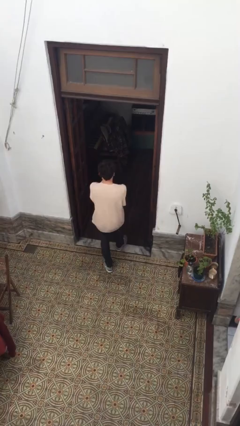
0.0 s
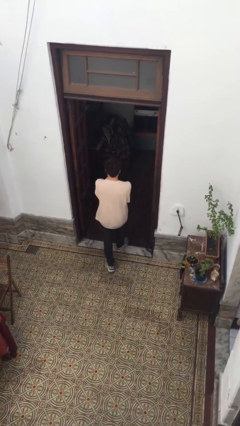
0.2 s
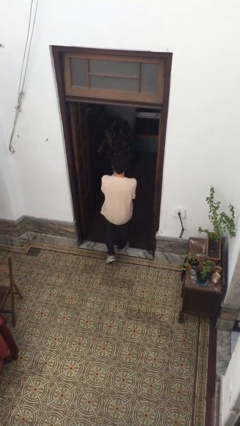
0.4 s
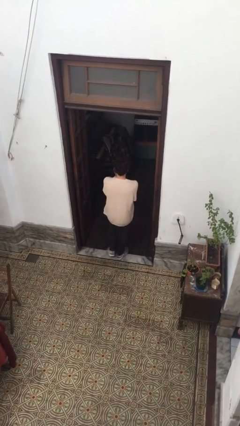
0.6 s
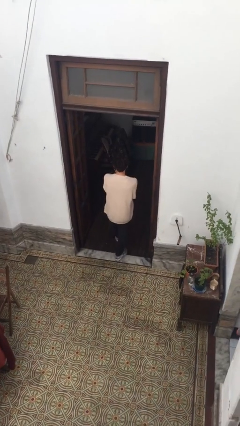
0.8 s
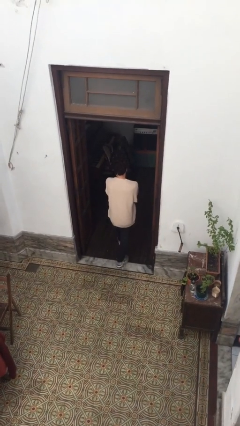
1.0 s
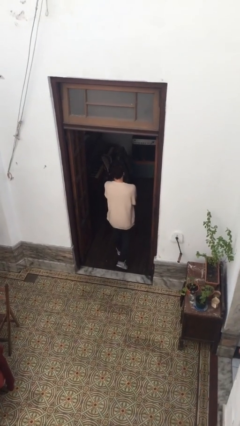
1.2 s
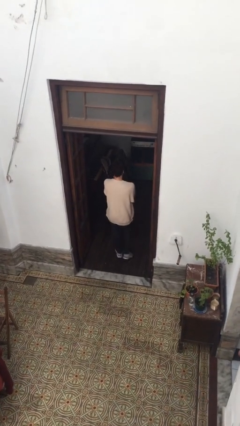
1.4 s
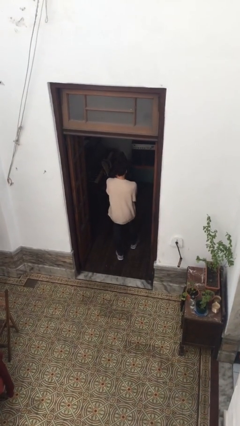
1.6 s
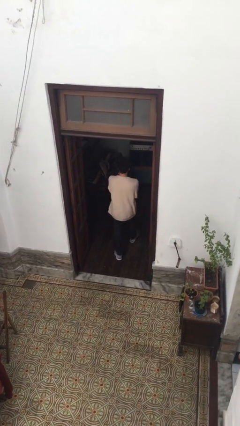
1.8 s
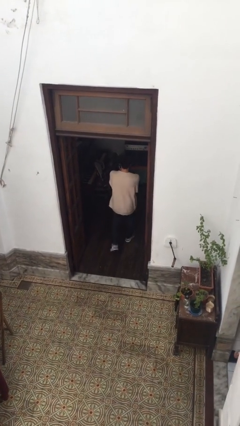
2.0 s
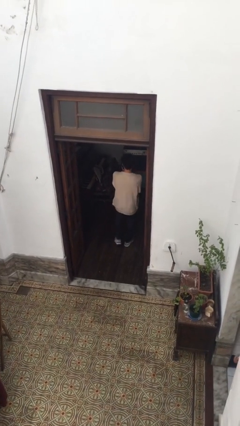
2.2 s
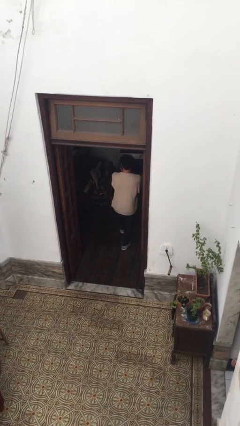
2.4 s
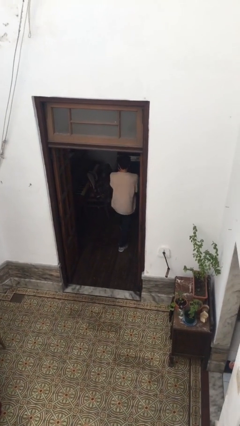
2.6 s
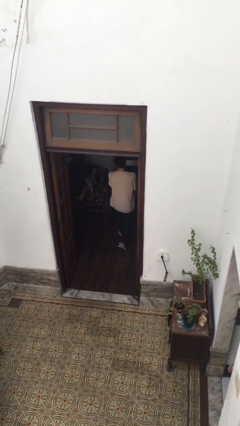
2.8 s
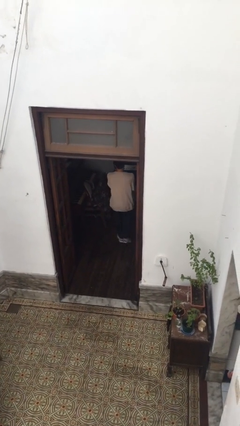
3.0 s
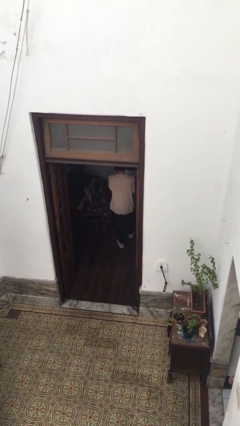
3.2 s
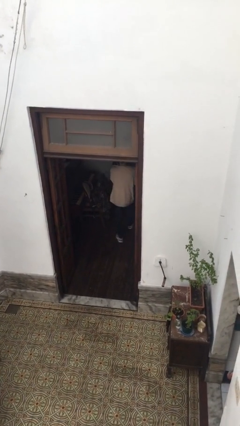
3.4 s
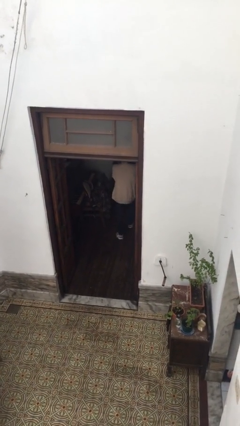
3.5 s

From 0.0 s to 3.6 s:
person exits scene through structure

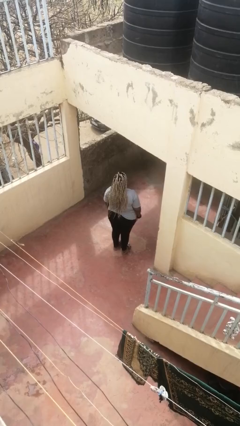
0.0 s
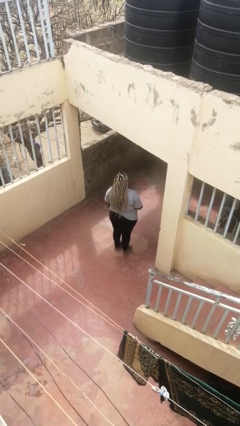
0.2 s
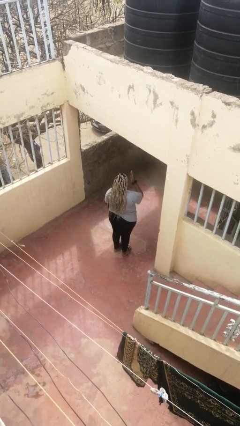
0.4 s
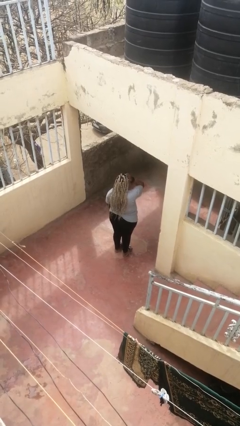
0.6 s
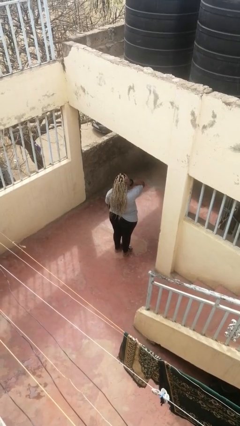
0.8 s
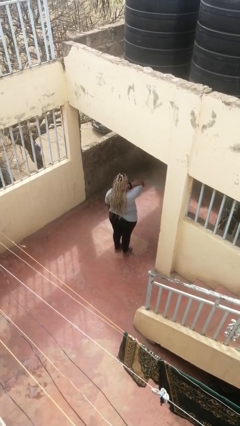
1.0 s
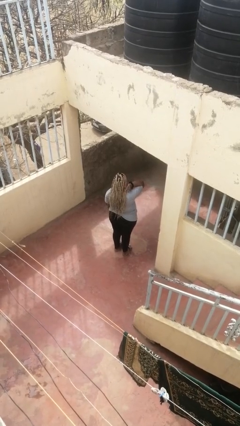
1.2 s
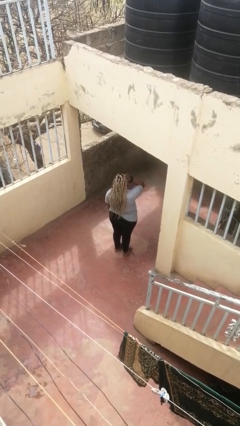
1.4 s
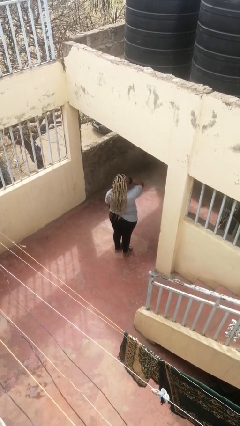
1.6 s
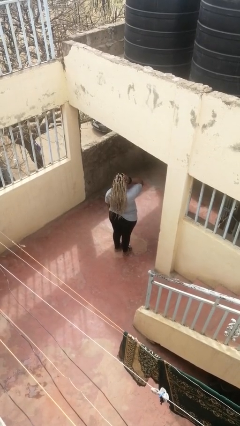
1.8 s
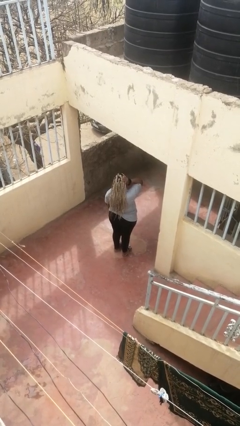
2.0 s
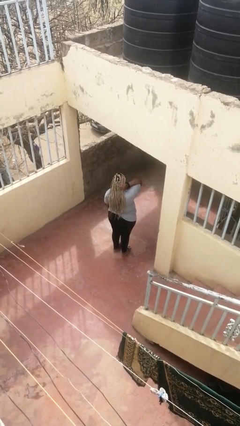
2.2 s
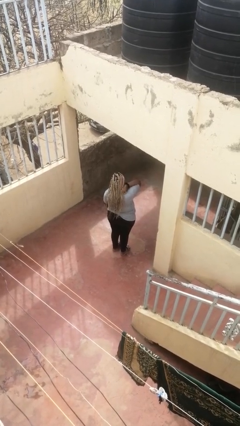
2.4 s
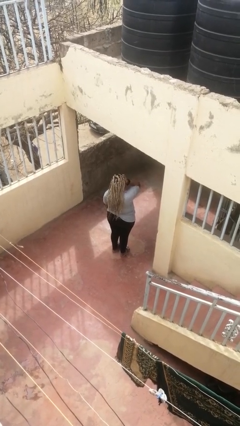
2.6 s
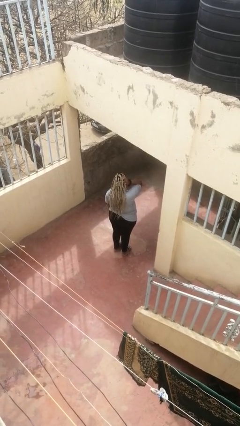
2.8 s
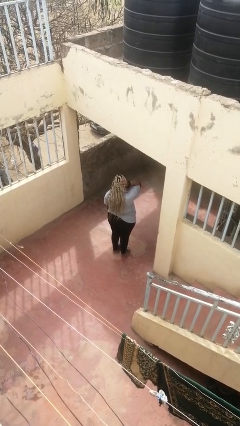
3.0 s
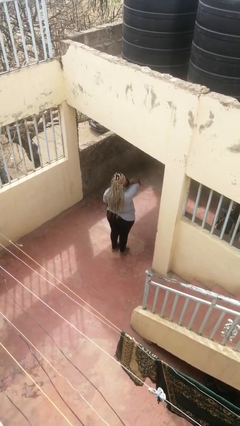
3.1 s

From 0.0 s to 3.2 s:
person strokes hair

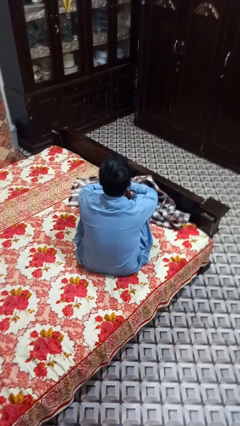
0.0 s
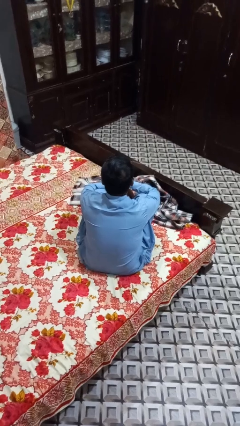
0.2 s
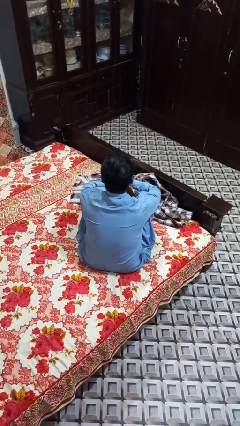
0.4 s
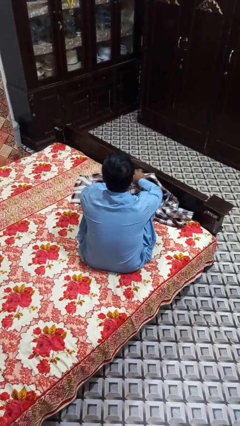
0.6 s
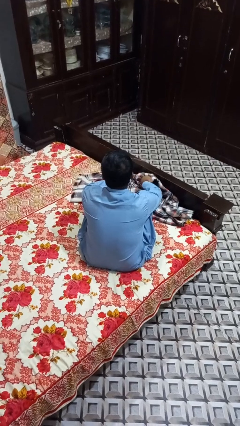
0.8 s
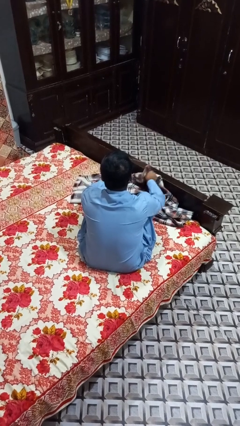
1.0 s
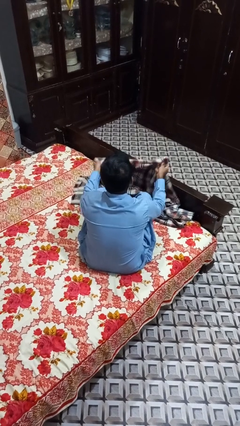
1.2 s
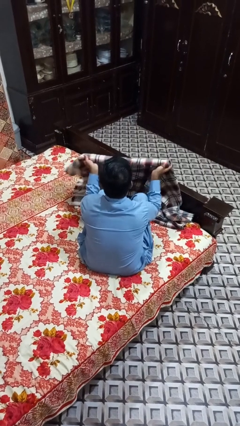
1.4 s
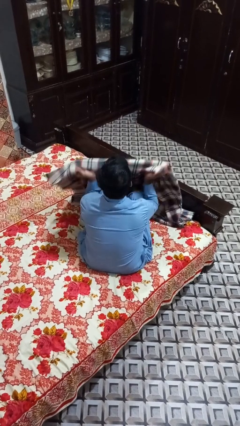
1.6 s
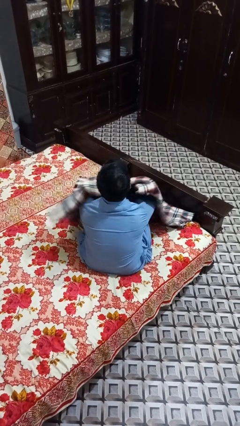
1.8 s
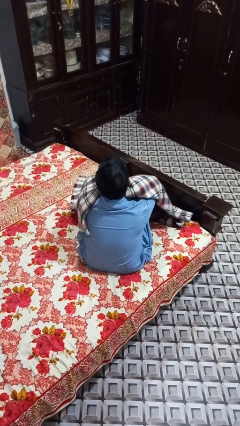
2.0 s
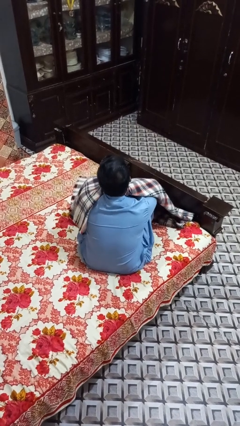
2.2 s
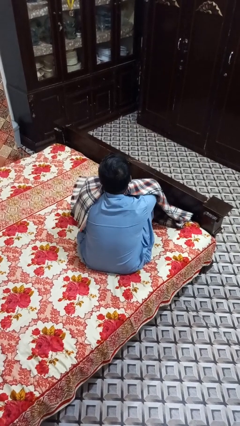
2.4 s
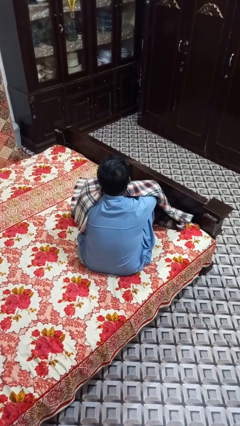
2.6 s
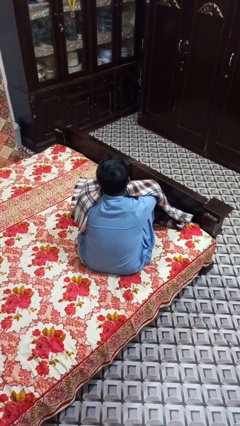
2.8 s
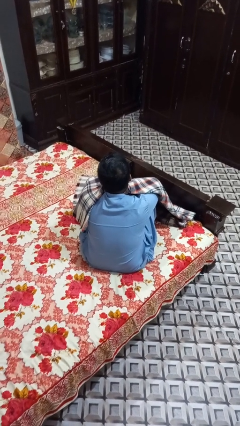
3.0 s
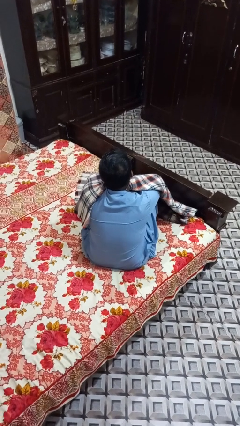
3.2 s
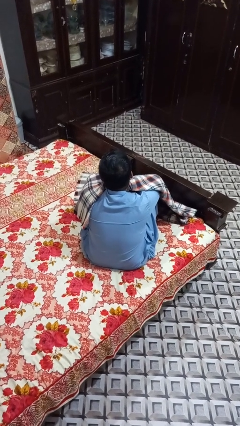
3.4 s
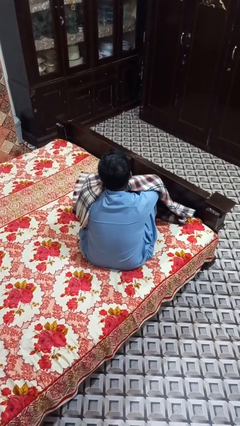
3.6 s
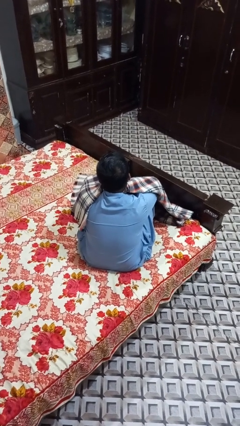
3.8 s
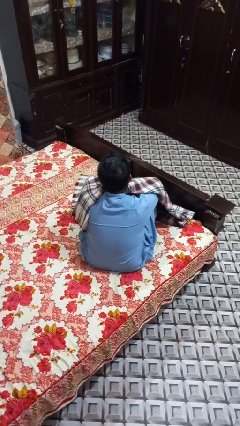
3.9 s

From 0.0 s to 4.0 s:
person covers with blanket

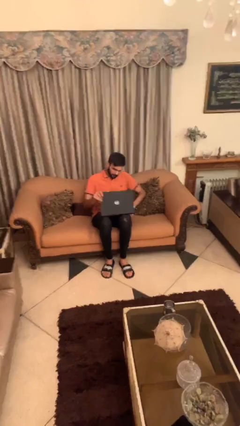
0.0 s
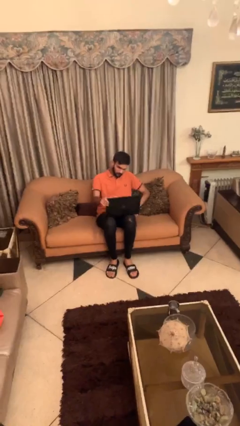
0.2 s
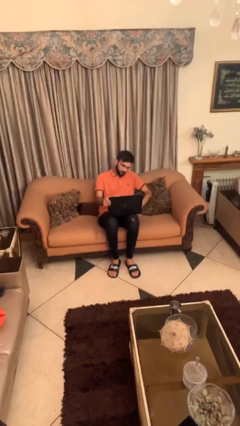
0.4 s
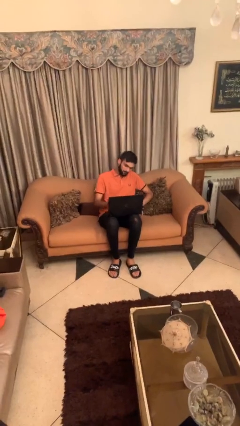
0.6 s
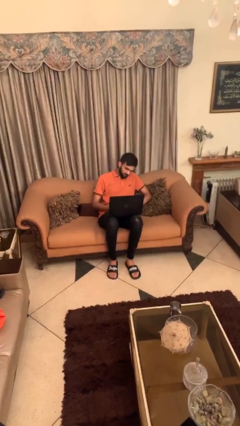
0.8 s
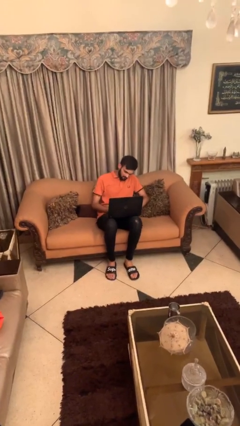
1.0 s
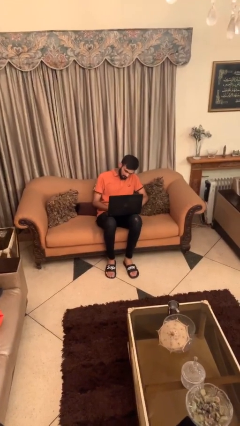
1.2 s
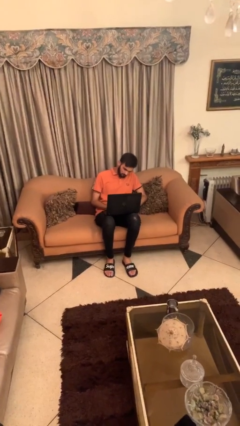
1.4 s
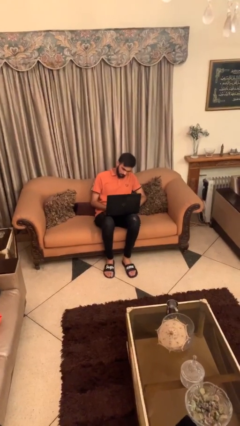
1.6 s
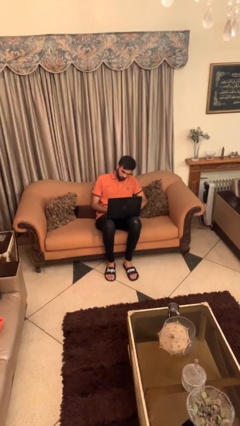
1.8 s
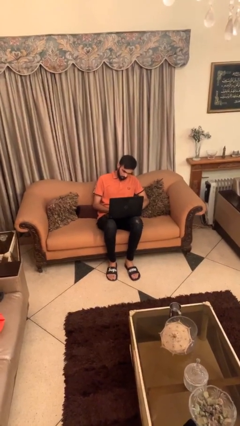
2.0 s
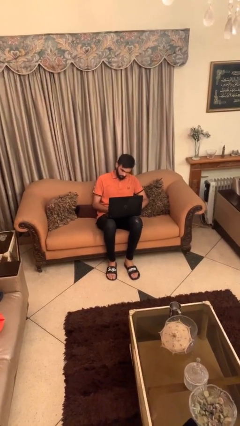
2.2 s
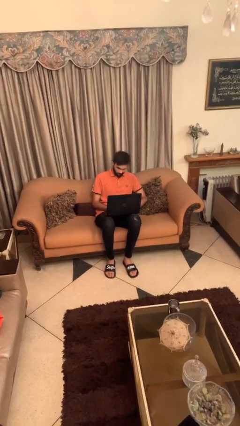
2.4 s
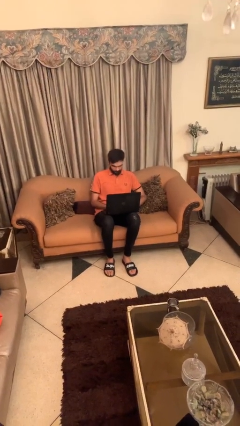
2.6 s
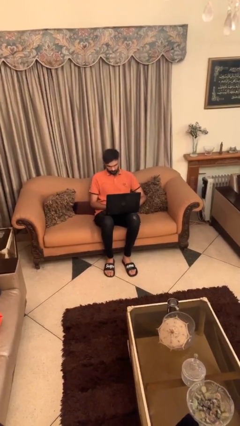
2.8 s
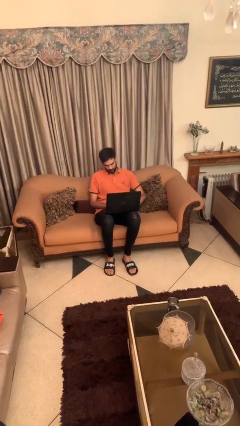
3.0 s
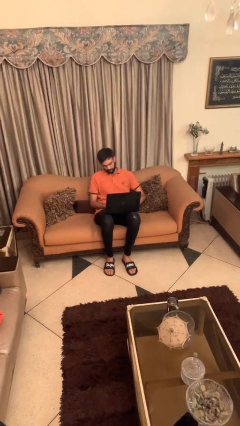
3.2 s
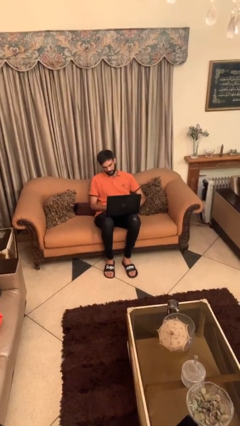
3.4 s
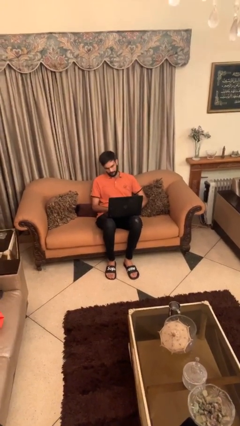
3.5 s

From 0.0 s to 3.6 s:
person interacts with laptop

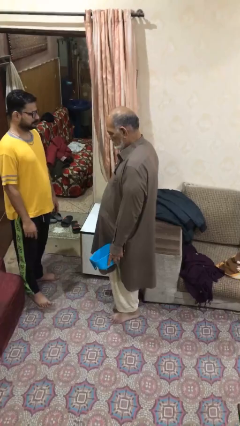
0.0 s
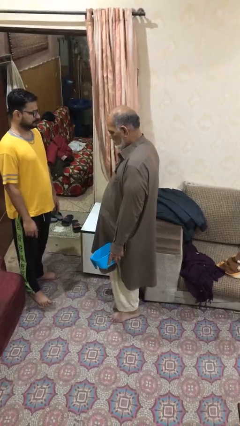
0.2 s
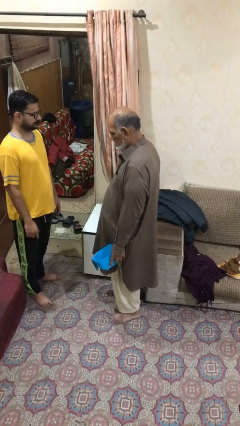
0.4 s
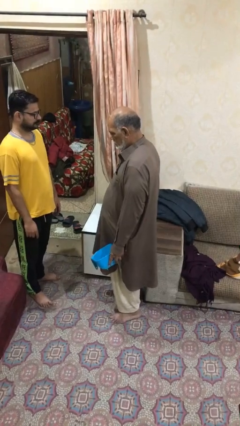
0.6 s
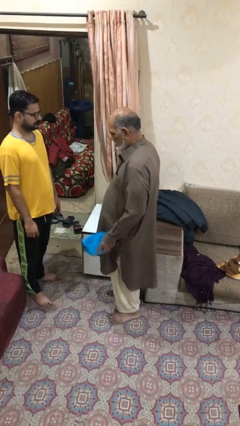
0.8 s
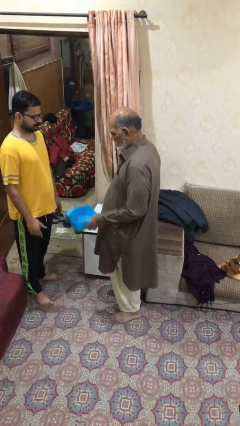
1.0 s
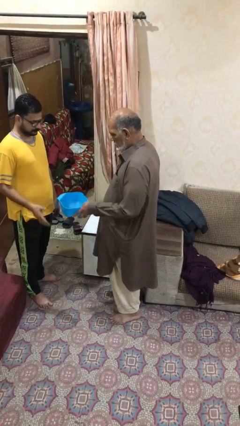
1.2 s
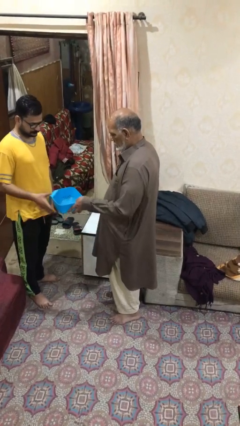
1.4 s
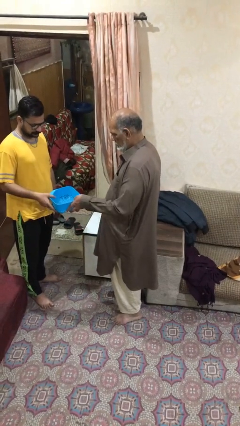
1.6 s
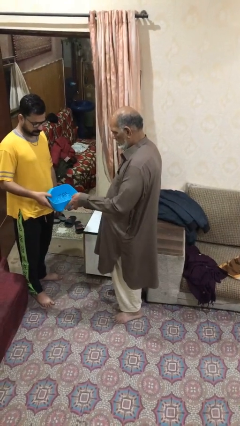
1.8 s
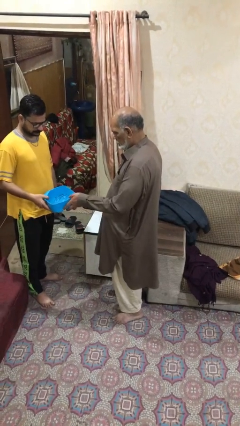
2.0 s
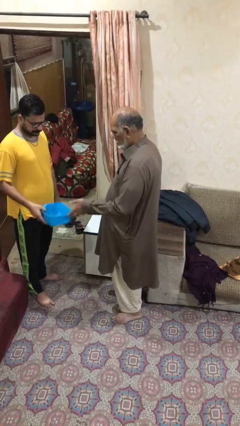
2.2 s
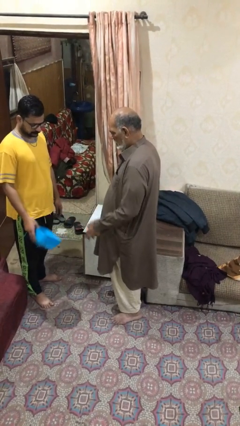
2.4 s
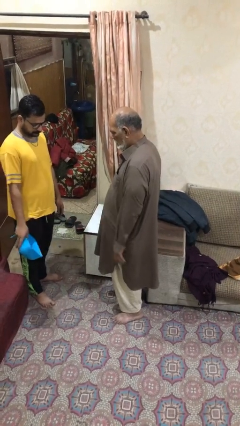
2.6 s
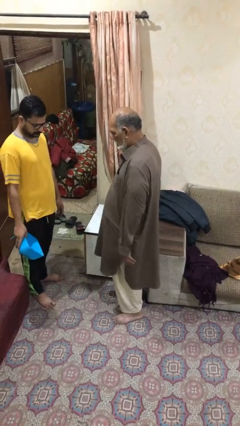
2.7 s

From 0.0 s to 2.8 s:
person transfers object to person
